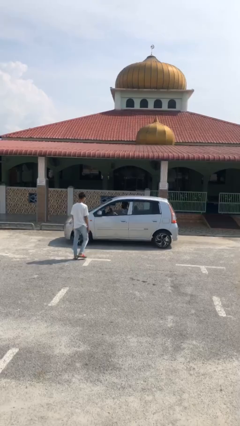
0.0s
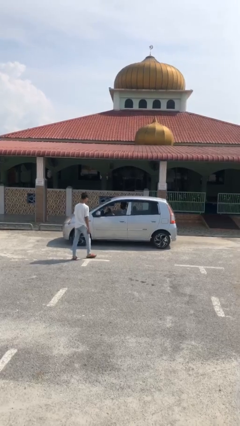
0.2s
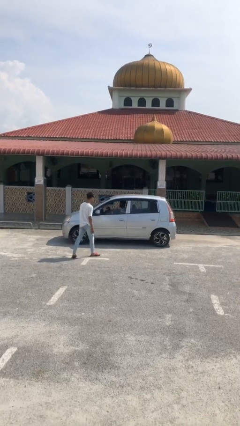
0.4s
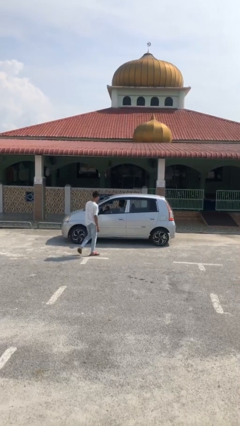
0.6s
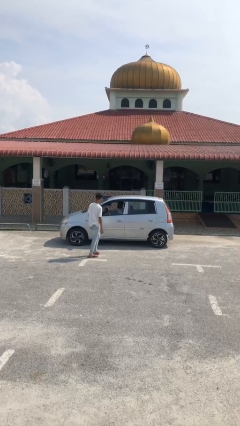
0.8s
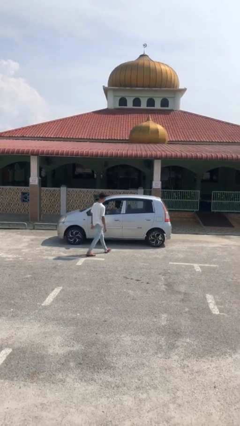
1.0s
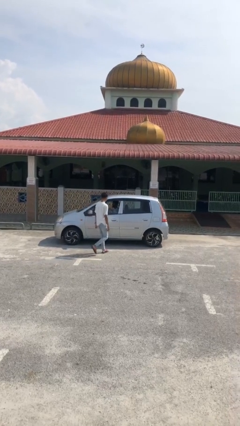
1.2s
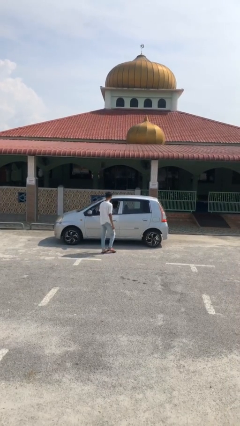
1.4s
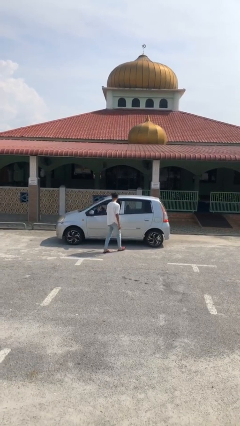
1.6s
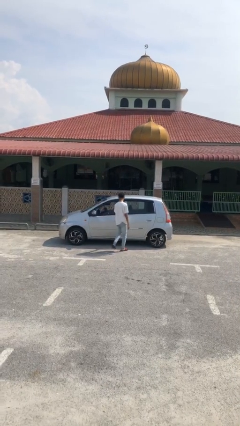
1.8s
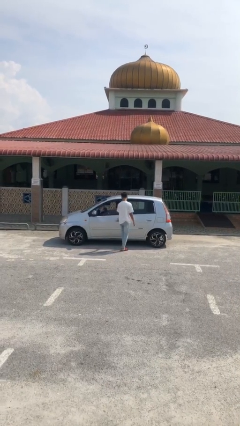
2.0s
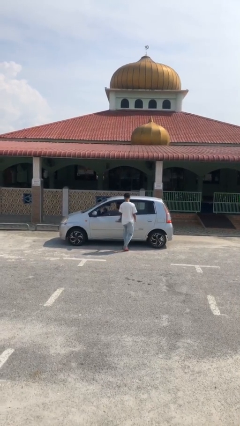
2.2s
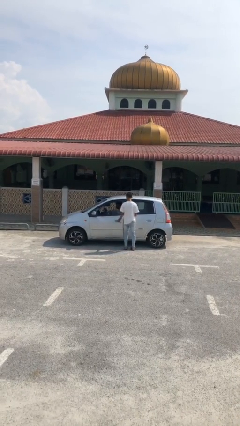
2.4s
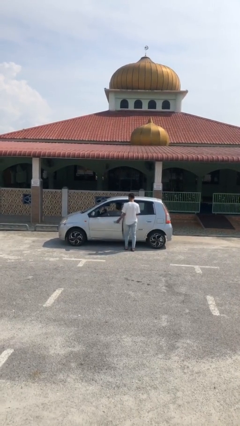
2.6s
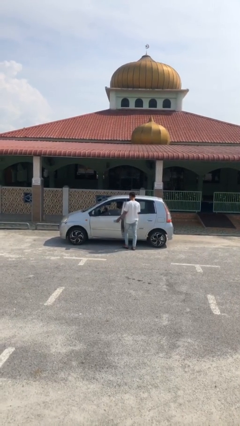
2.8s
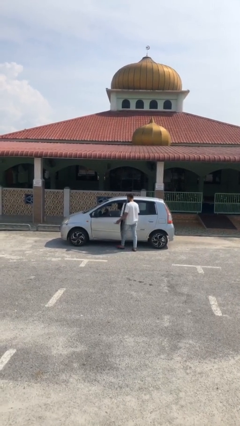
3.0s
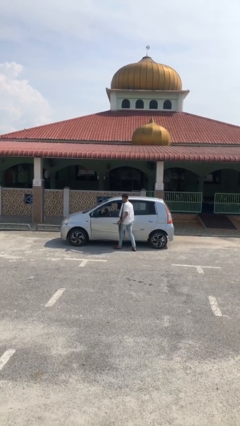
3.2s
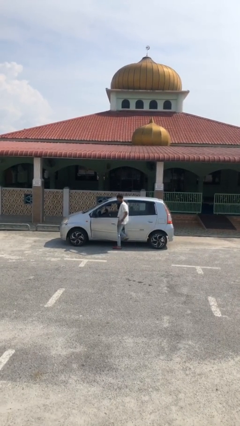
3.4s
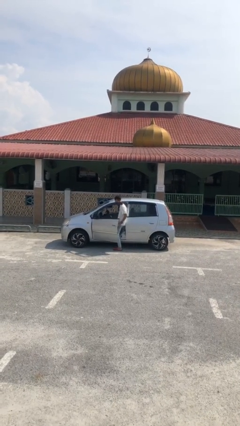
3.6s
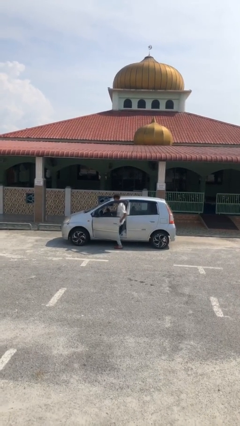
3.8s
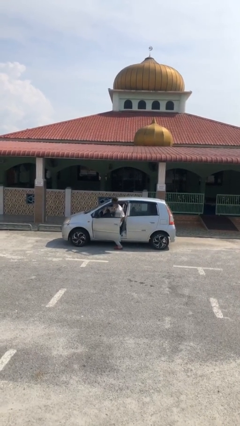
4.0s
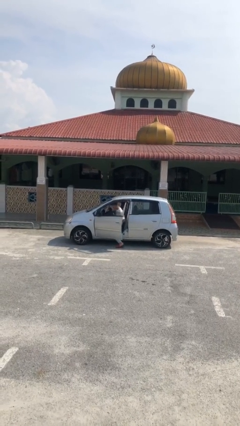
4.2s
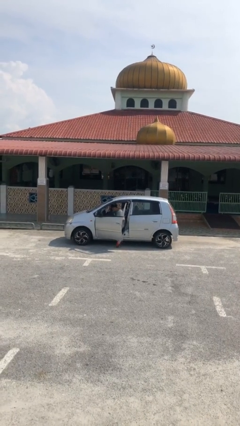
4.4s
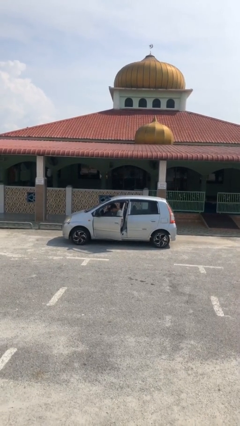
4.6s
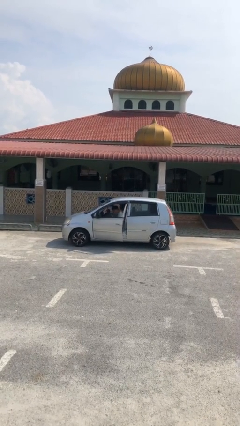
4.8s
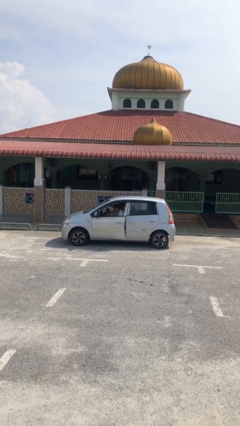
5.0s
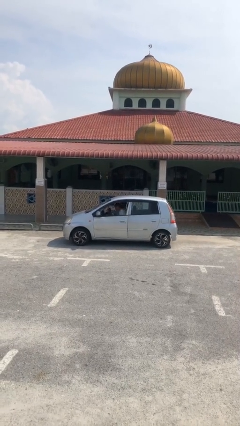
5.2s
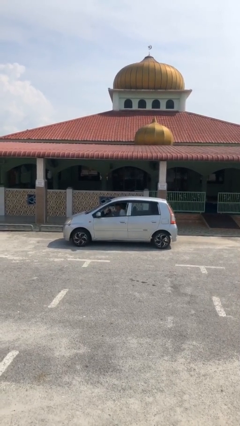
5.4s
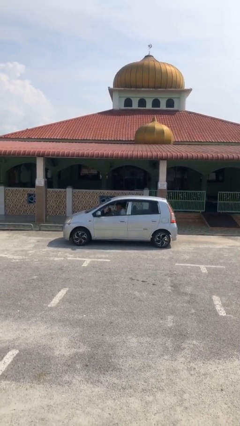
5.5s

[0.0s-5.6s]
car picks up person

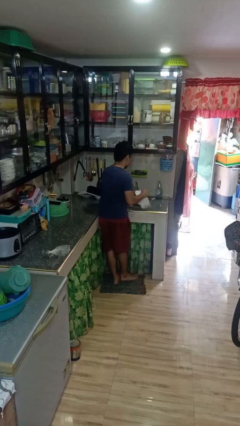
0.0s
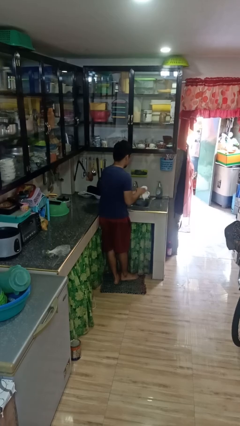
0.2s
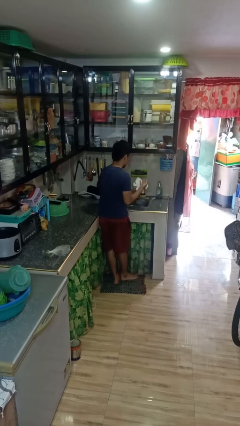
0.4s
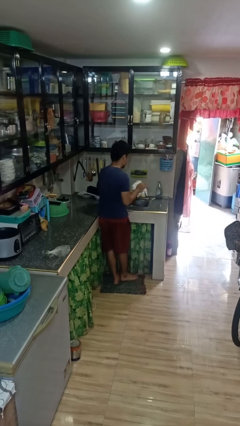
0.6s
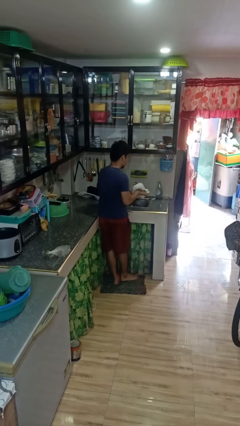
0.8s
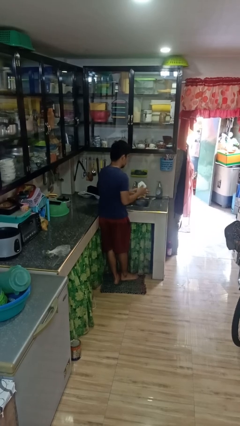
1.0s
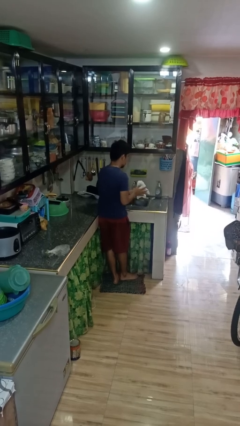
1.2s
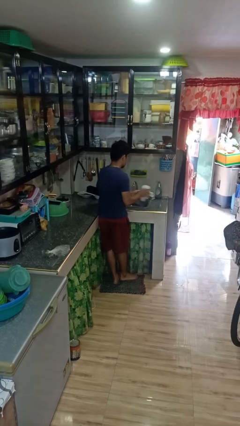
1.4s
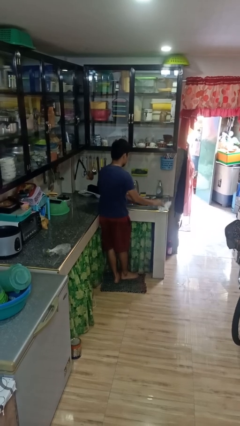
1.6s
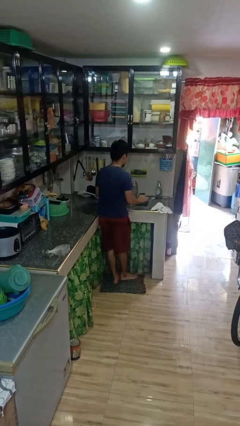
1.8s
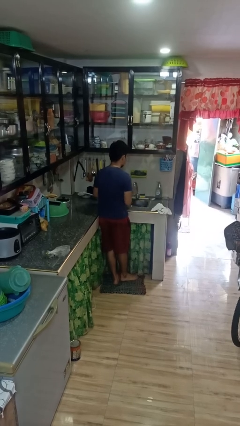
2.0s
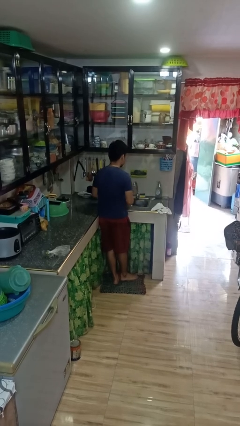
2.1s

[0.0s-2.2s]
person dries hands with towel

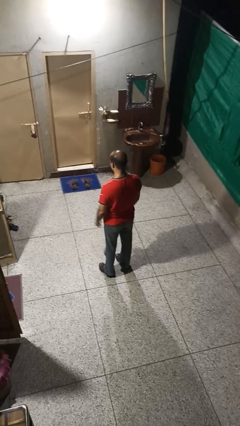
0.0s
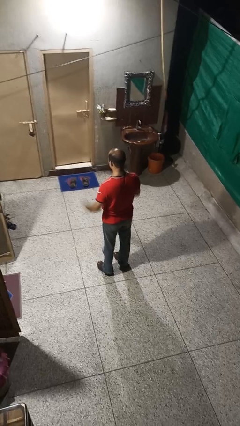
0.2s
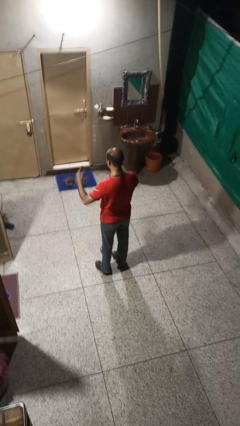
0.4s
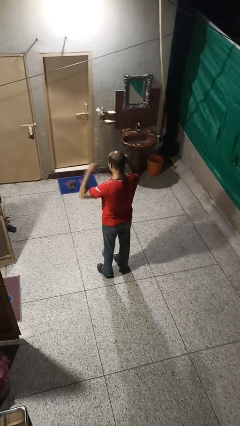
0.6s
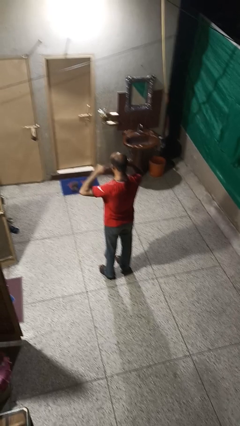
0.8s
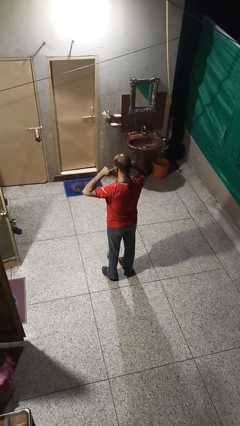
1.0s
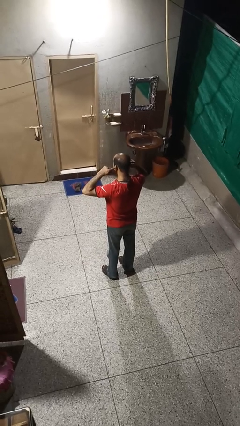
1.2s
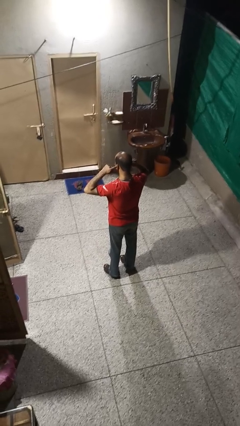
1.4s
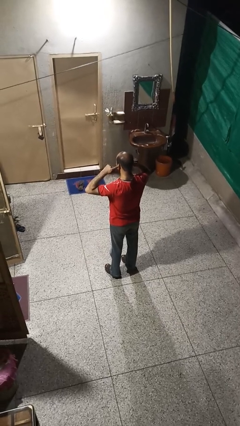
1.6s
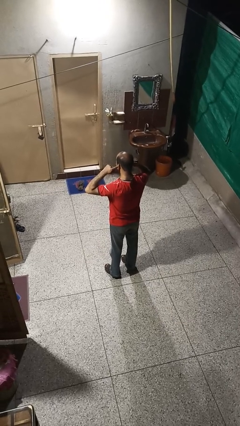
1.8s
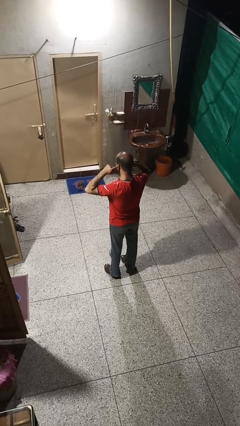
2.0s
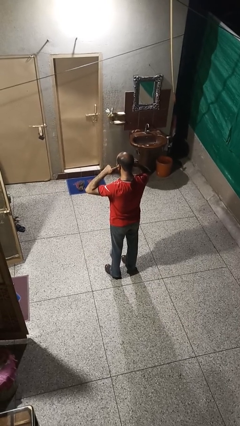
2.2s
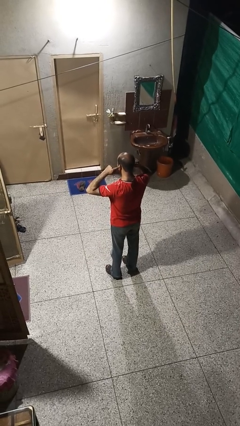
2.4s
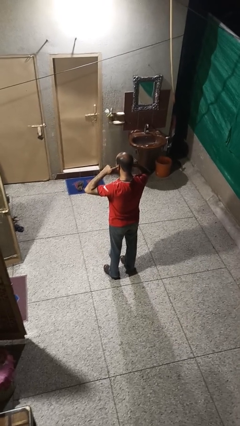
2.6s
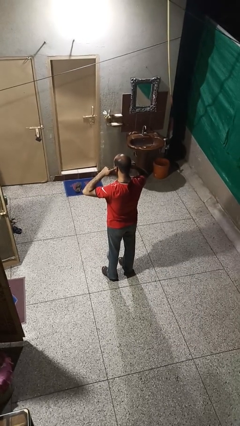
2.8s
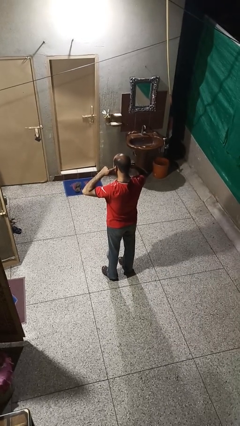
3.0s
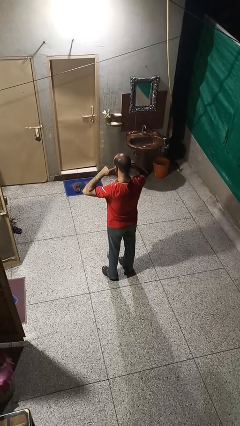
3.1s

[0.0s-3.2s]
person puts fingers in ear

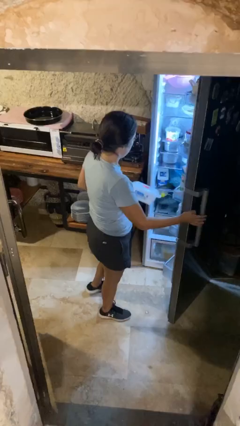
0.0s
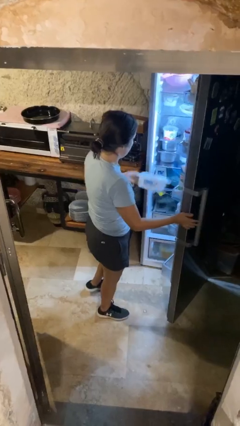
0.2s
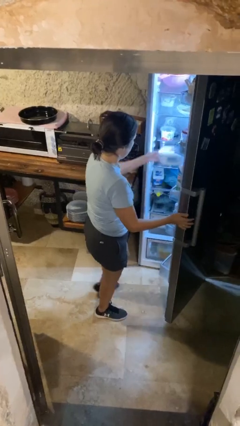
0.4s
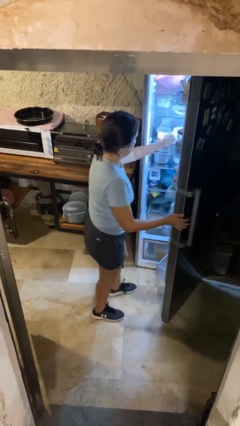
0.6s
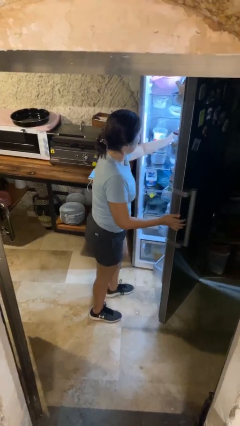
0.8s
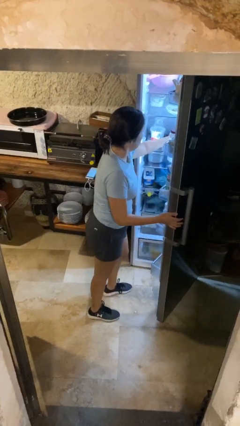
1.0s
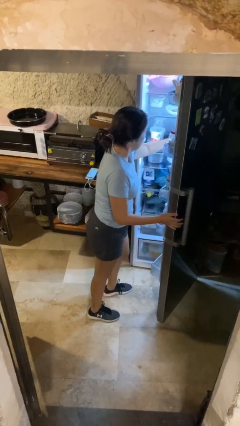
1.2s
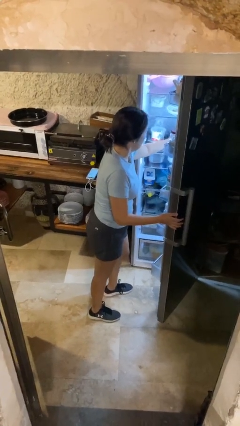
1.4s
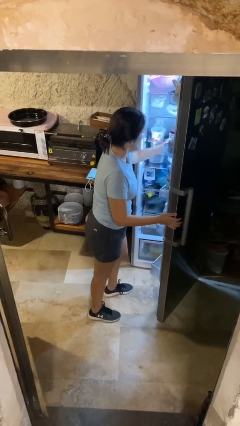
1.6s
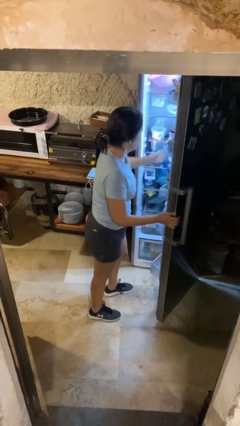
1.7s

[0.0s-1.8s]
person puts object into refrigerator

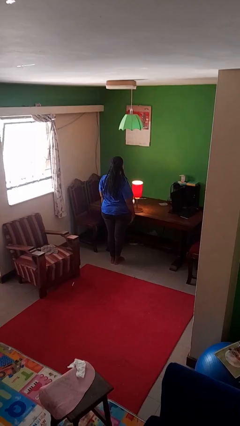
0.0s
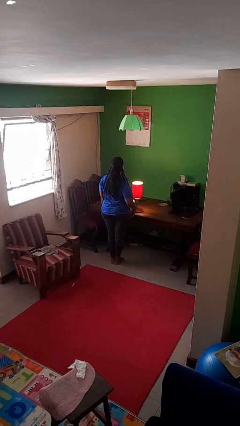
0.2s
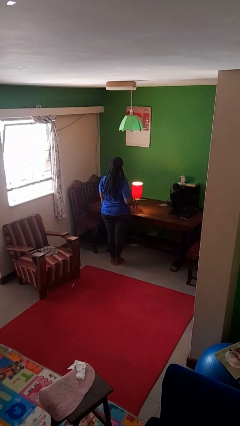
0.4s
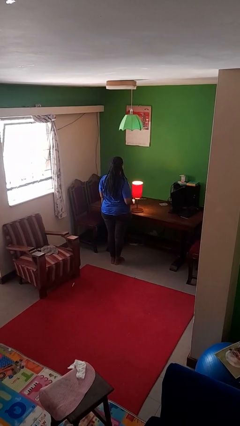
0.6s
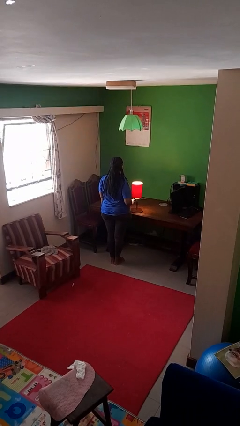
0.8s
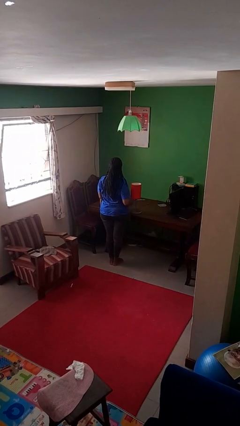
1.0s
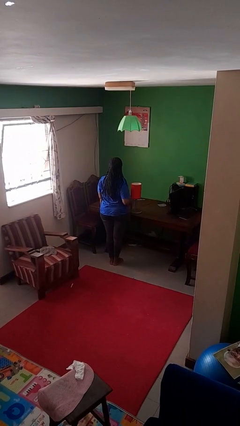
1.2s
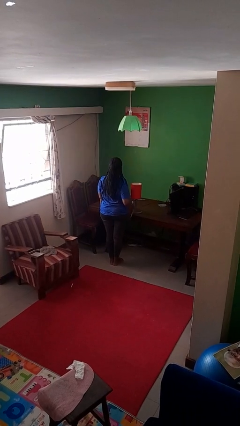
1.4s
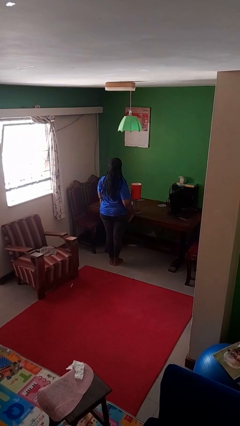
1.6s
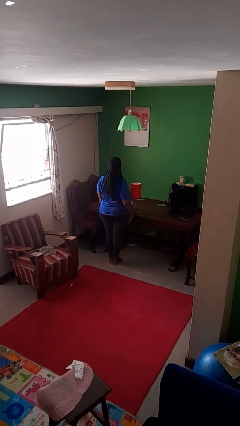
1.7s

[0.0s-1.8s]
person turns off lamp

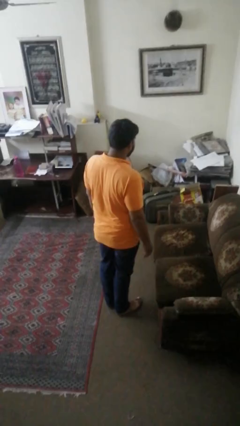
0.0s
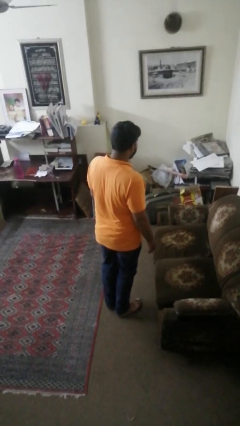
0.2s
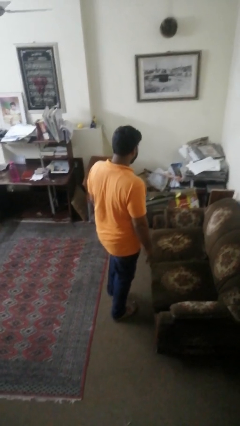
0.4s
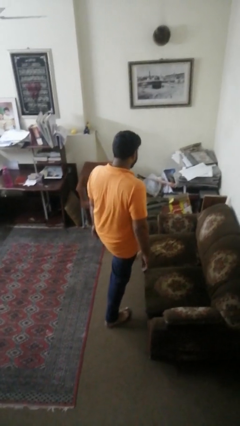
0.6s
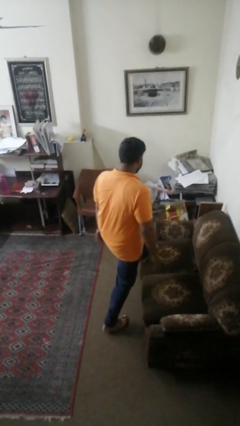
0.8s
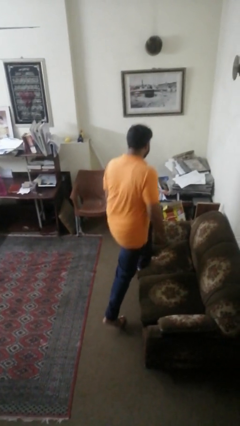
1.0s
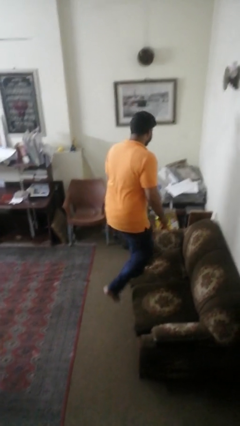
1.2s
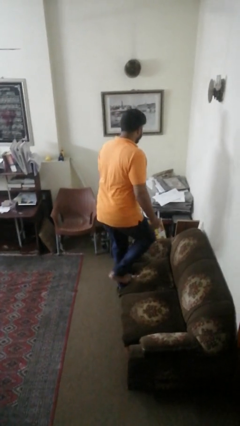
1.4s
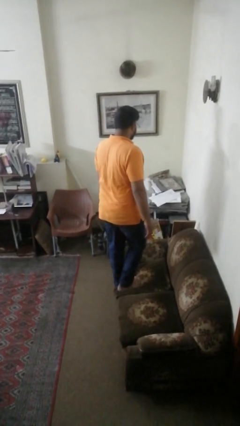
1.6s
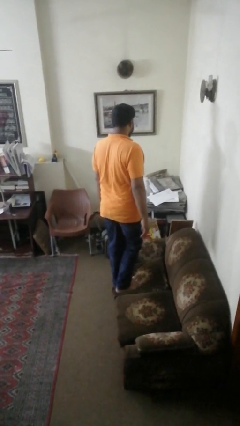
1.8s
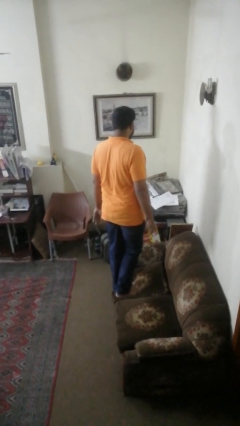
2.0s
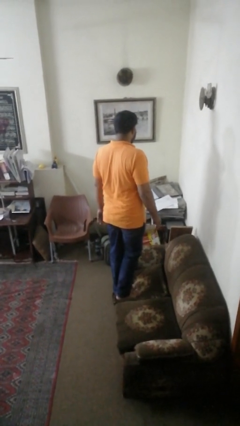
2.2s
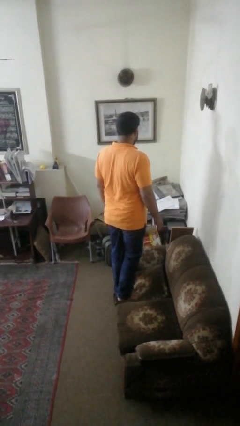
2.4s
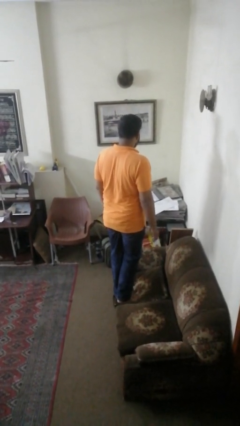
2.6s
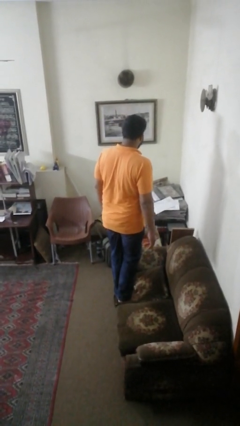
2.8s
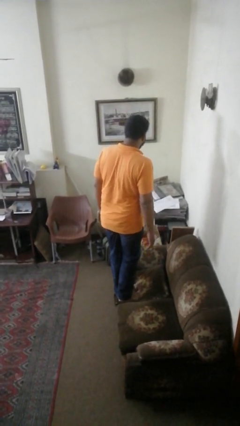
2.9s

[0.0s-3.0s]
person climbs on couch
